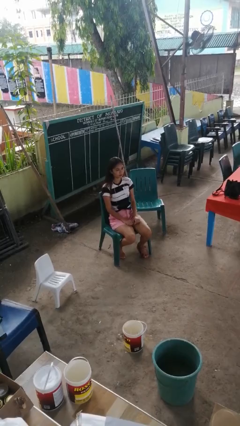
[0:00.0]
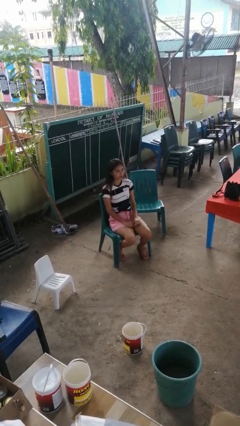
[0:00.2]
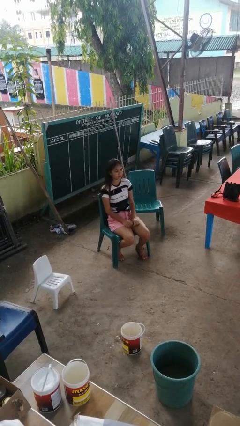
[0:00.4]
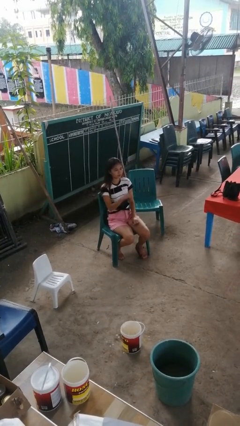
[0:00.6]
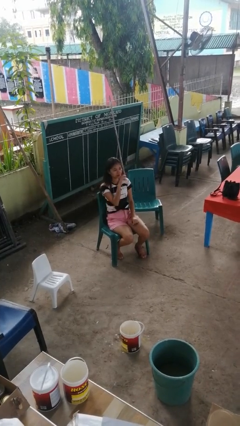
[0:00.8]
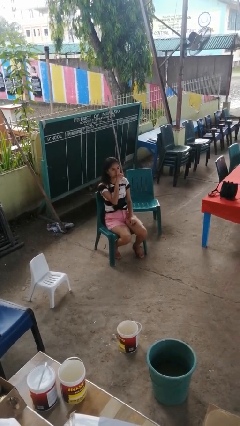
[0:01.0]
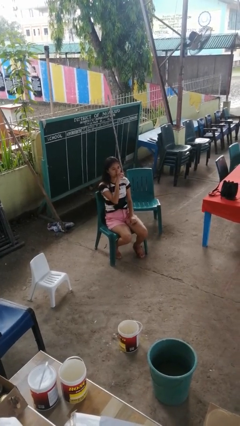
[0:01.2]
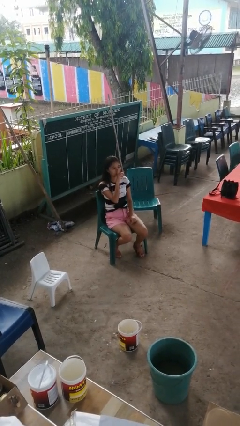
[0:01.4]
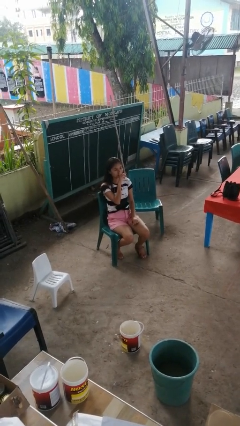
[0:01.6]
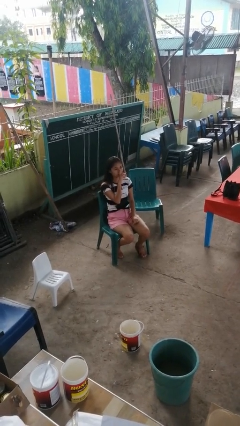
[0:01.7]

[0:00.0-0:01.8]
person gestures be quiet

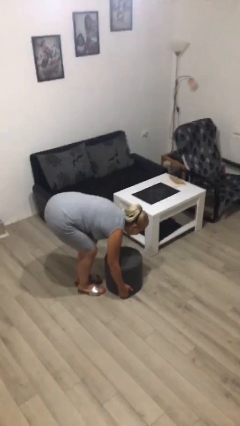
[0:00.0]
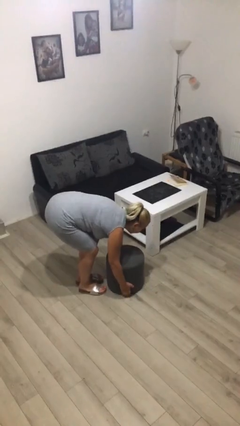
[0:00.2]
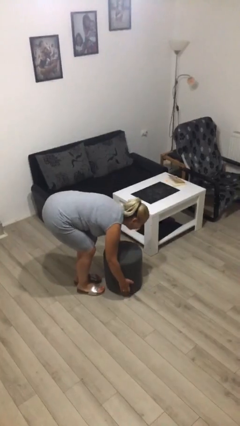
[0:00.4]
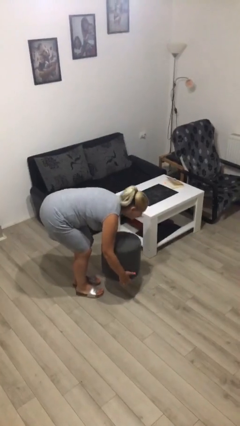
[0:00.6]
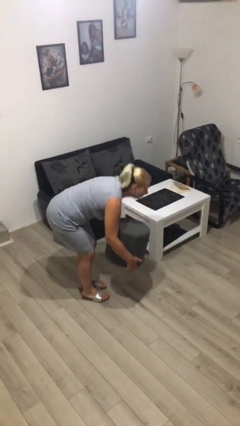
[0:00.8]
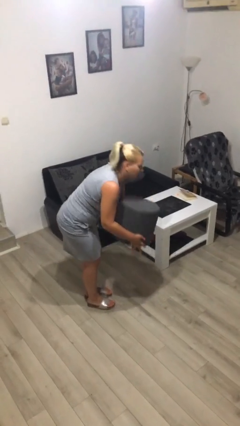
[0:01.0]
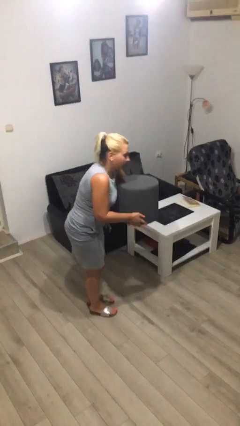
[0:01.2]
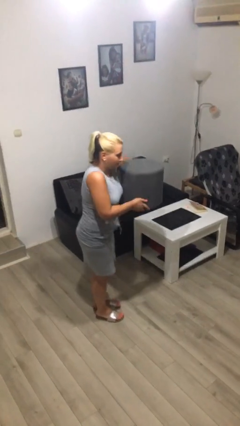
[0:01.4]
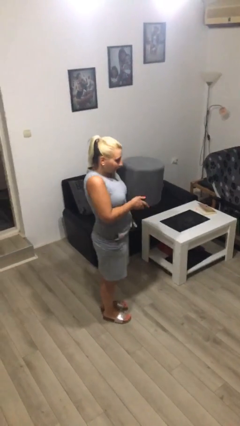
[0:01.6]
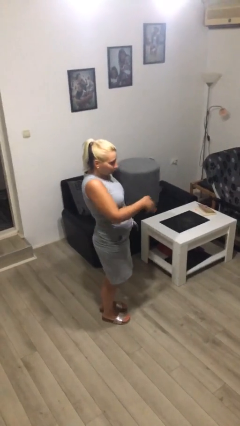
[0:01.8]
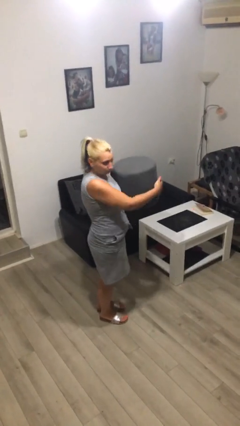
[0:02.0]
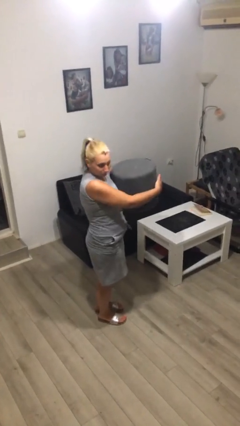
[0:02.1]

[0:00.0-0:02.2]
person picks up object from floor

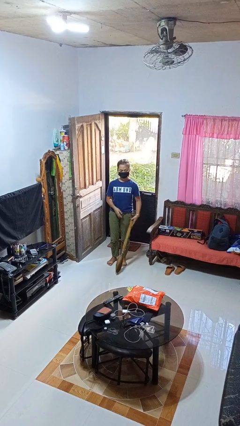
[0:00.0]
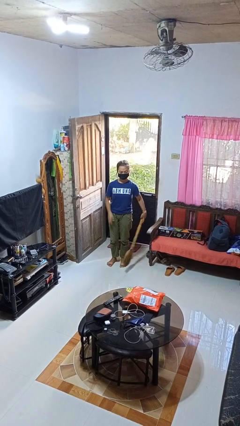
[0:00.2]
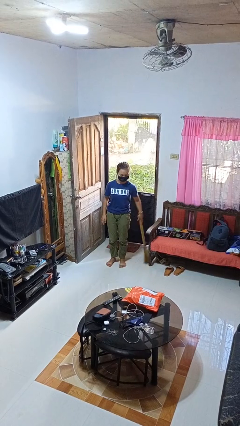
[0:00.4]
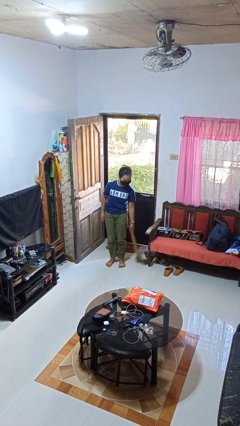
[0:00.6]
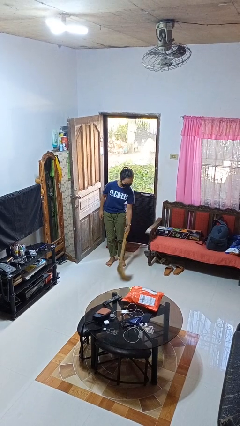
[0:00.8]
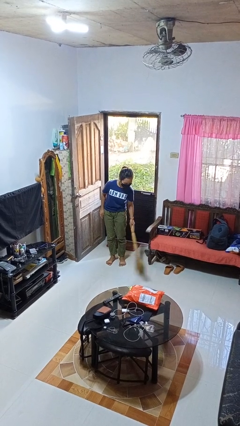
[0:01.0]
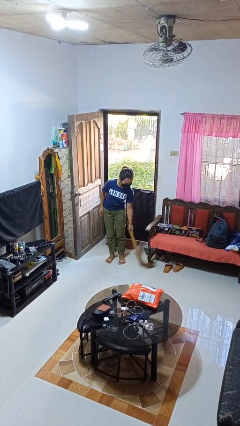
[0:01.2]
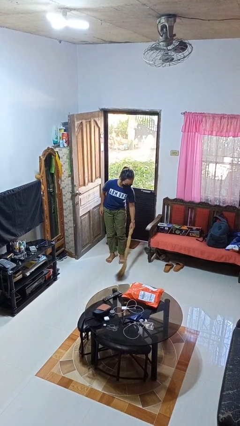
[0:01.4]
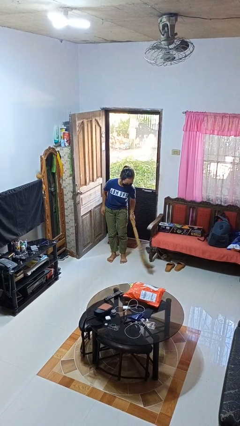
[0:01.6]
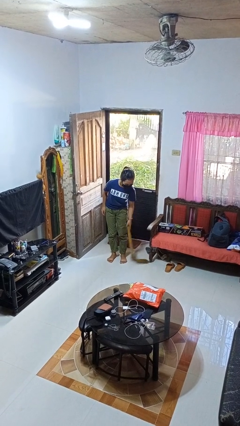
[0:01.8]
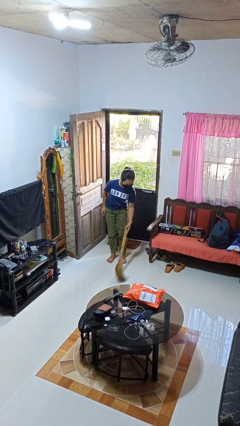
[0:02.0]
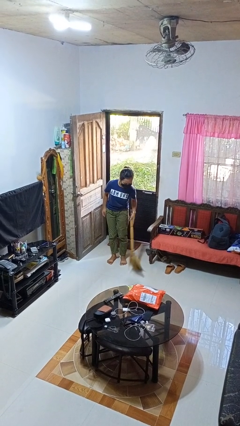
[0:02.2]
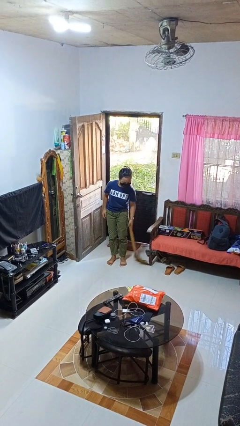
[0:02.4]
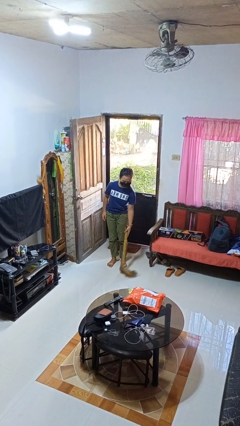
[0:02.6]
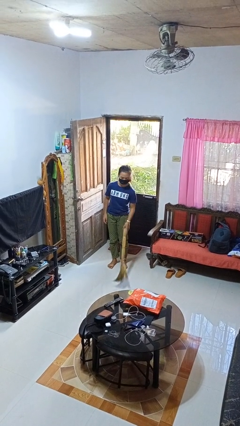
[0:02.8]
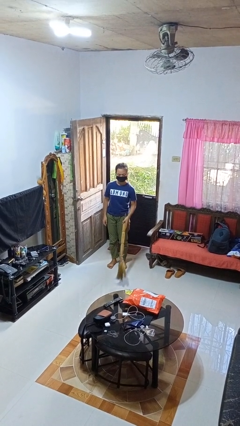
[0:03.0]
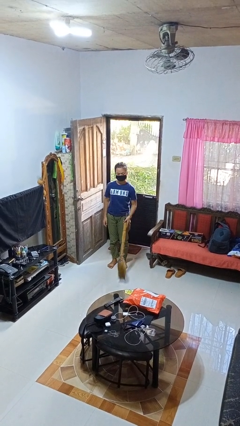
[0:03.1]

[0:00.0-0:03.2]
person sweeps floor

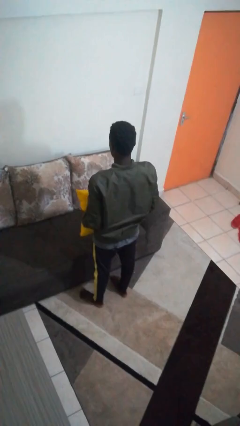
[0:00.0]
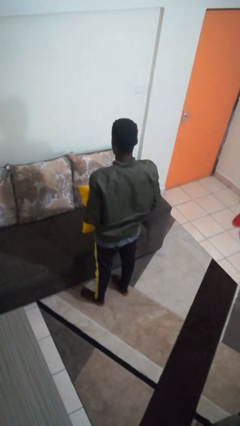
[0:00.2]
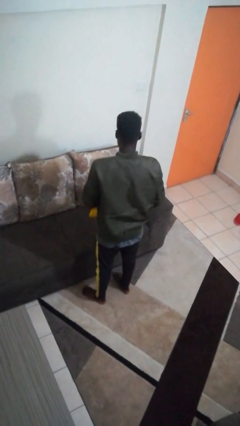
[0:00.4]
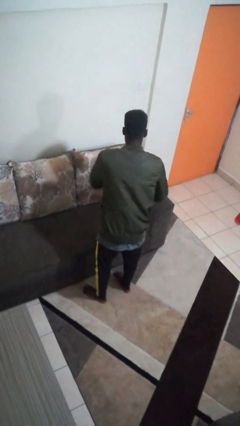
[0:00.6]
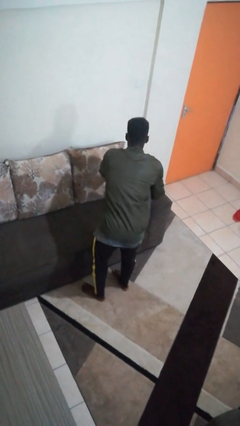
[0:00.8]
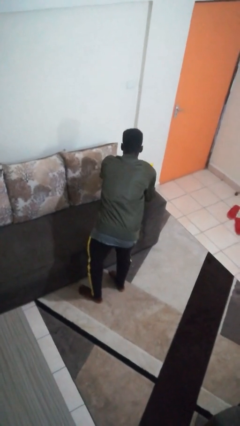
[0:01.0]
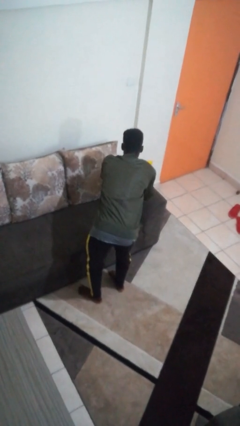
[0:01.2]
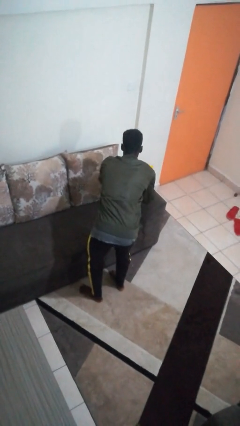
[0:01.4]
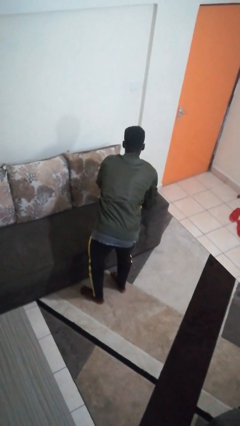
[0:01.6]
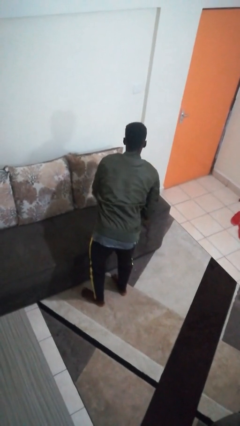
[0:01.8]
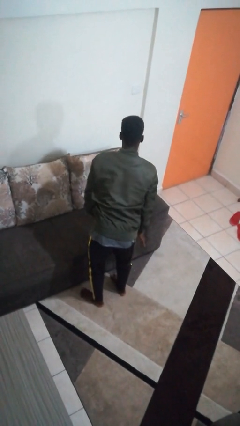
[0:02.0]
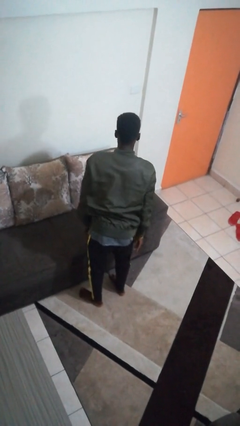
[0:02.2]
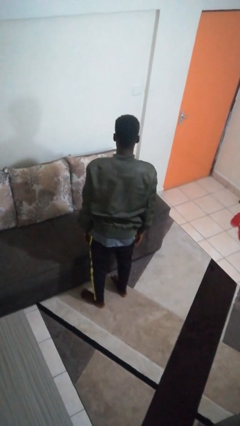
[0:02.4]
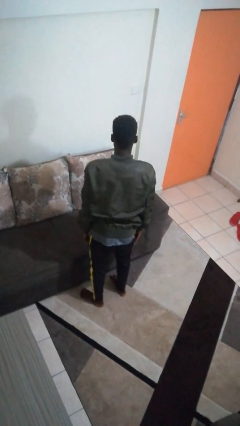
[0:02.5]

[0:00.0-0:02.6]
person puts down object on couch

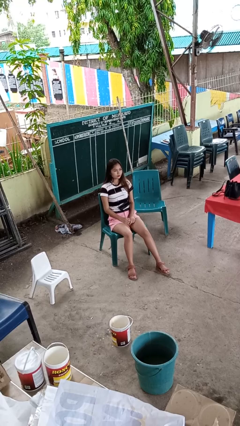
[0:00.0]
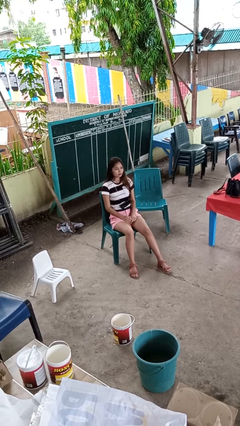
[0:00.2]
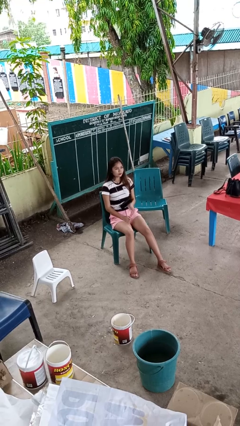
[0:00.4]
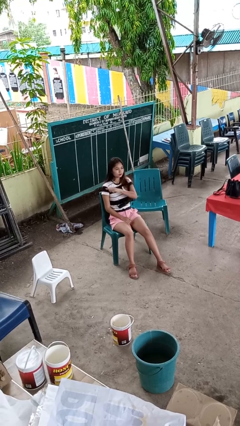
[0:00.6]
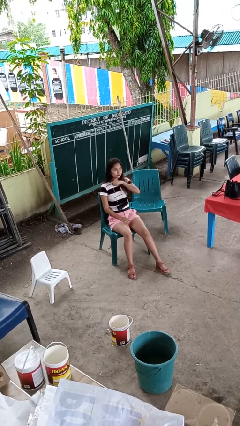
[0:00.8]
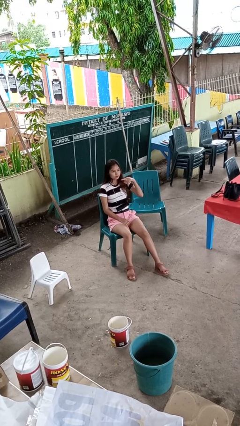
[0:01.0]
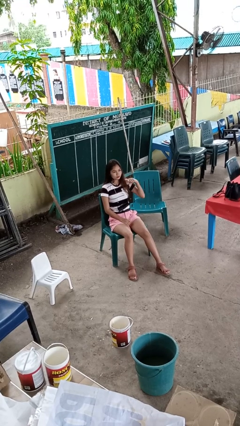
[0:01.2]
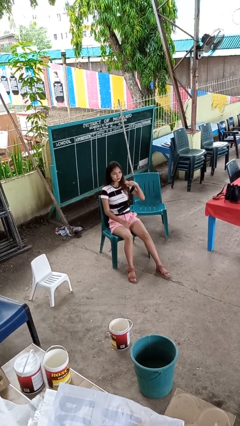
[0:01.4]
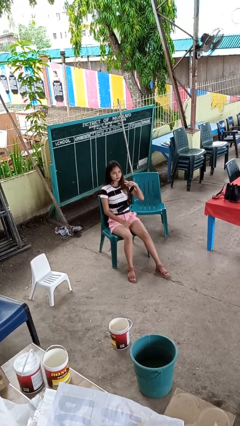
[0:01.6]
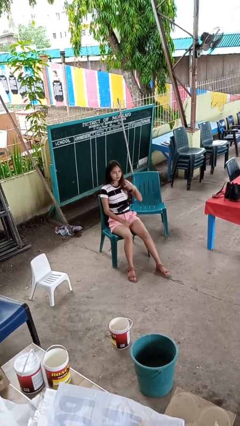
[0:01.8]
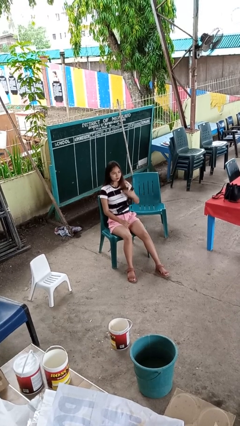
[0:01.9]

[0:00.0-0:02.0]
person gestures cut

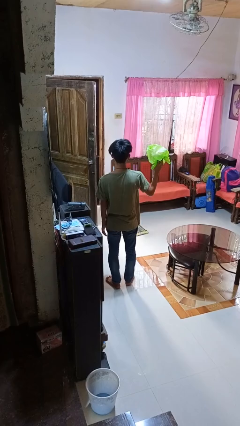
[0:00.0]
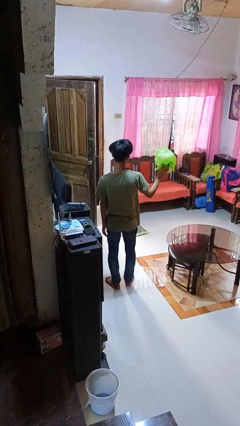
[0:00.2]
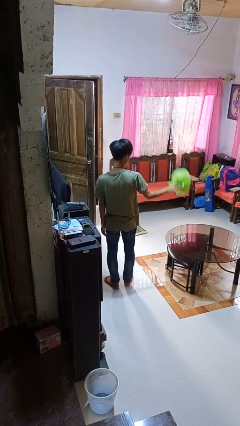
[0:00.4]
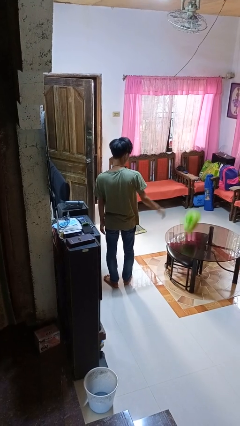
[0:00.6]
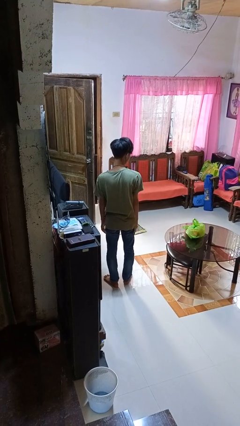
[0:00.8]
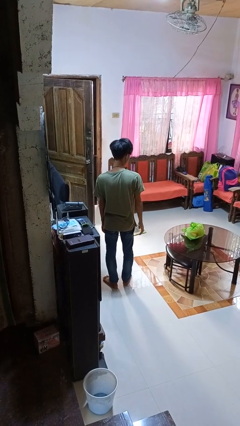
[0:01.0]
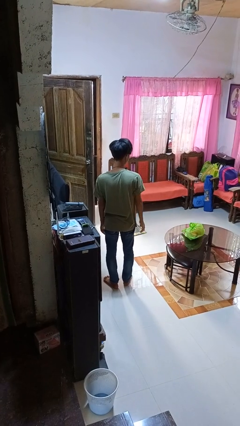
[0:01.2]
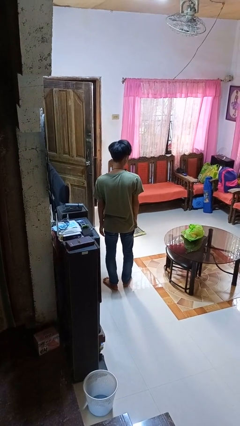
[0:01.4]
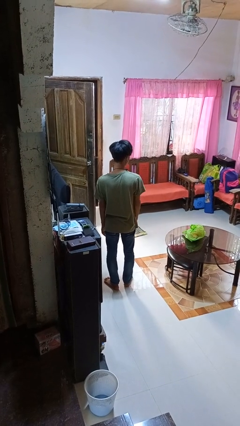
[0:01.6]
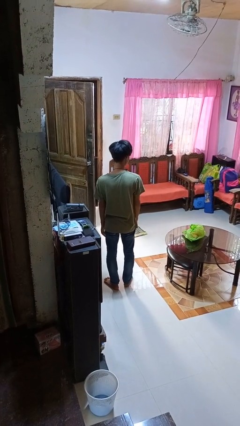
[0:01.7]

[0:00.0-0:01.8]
person throws object on table

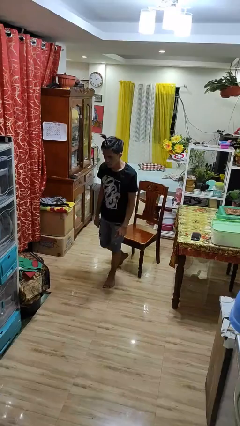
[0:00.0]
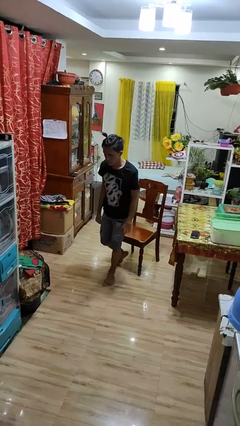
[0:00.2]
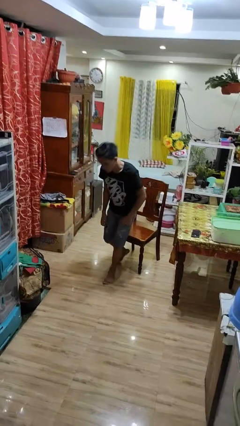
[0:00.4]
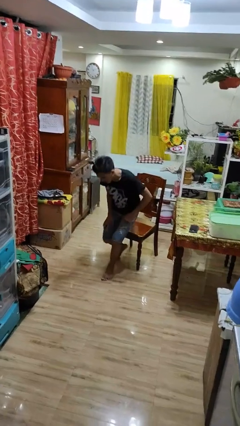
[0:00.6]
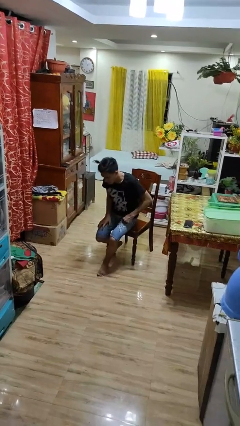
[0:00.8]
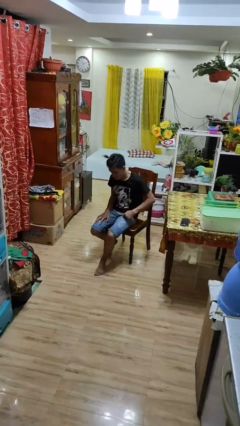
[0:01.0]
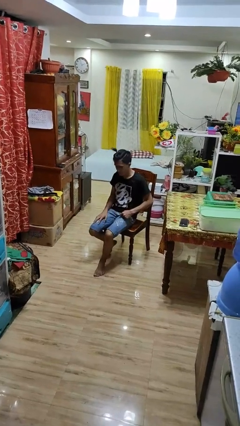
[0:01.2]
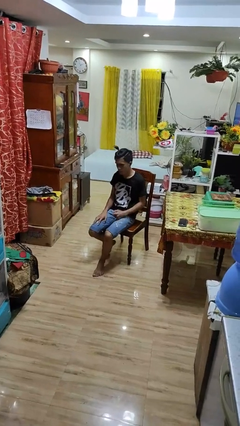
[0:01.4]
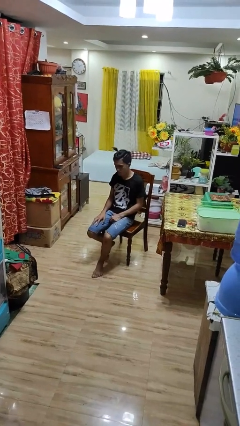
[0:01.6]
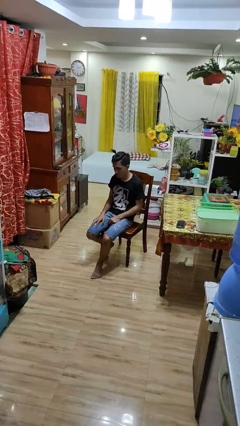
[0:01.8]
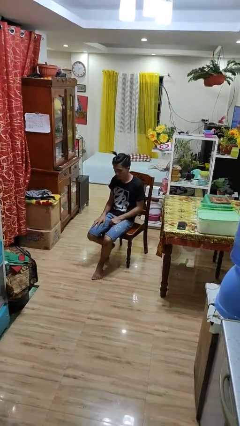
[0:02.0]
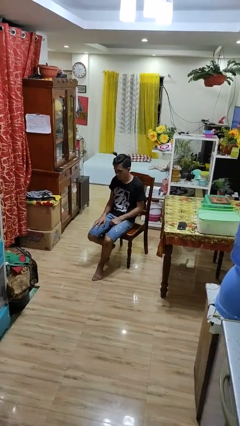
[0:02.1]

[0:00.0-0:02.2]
person sits down

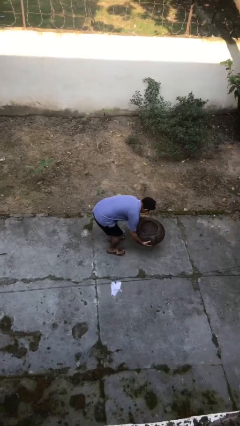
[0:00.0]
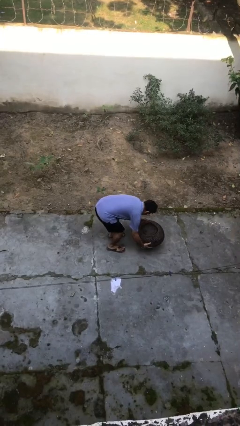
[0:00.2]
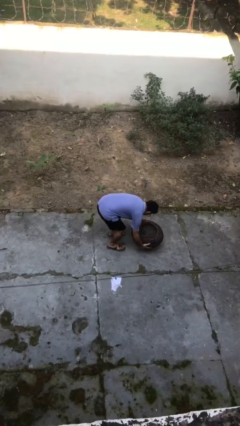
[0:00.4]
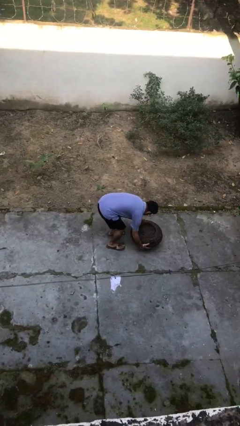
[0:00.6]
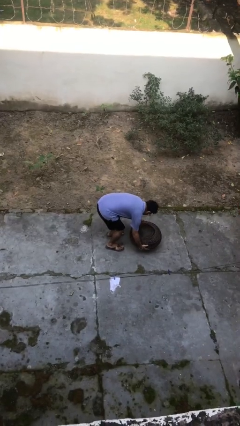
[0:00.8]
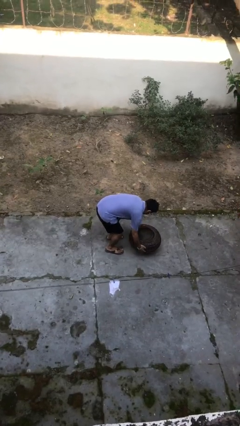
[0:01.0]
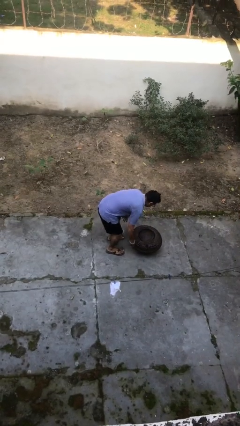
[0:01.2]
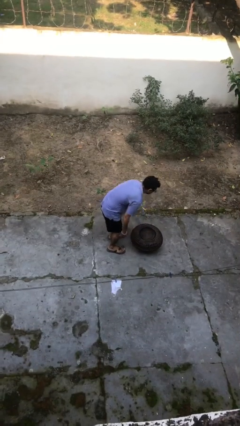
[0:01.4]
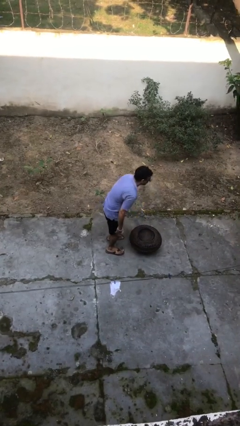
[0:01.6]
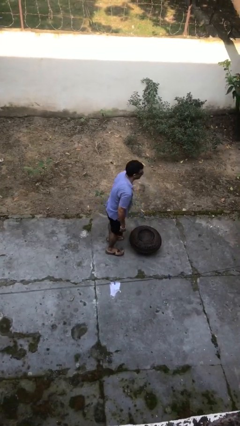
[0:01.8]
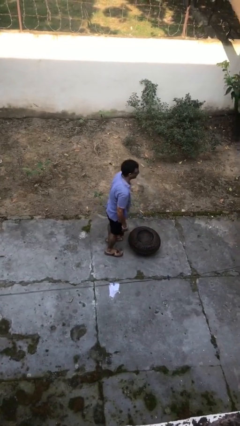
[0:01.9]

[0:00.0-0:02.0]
person puts down object on floor
